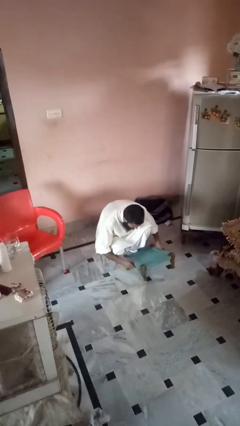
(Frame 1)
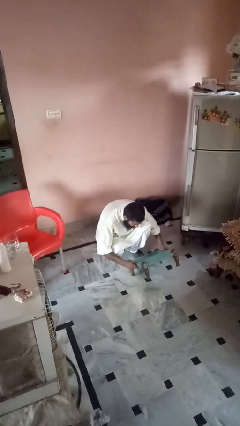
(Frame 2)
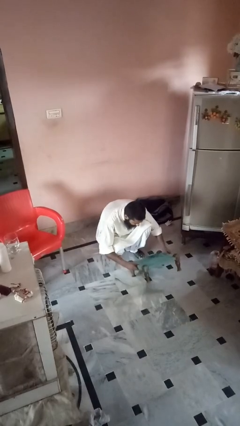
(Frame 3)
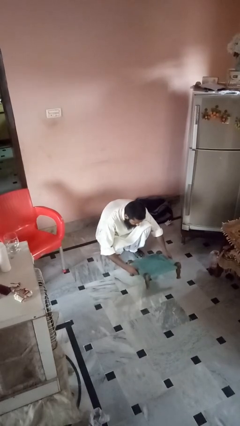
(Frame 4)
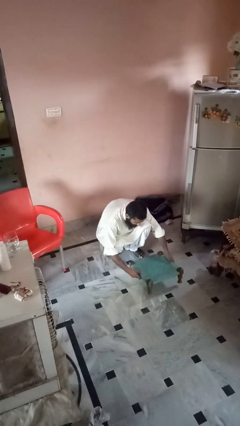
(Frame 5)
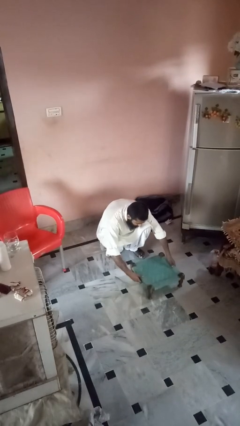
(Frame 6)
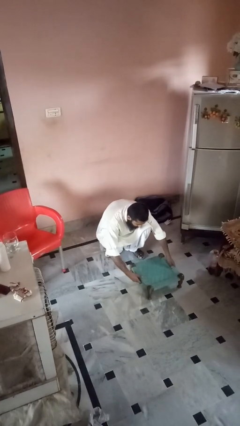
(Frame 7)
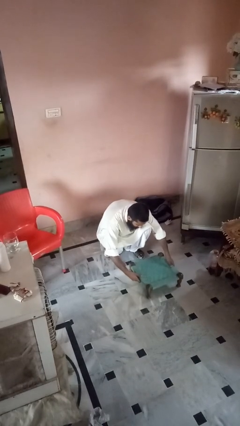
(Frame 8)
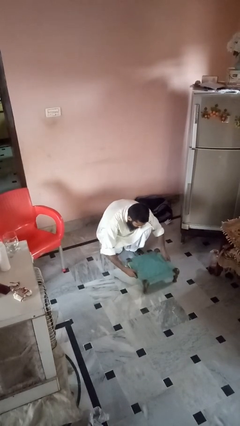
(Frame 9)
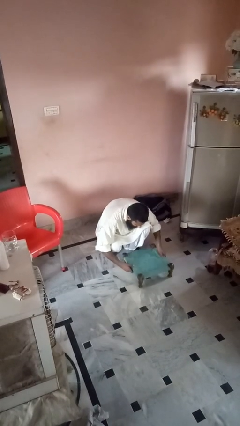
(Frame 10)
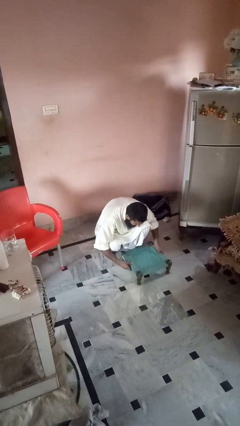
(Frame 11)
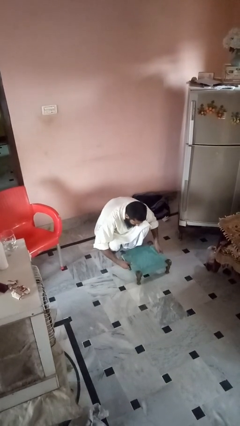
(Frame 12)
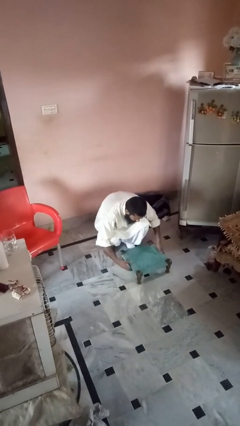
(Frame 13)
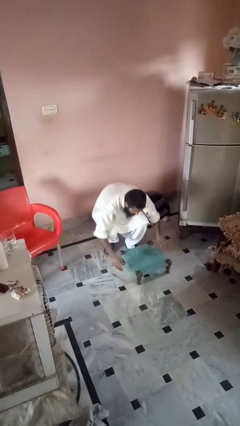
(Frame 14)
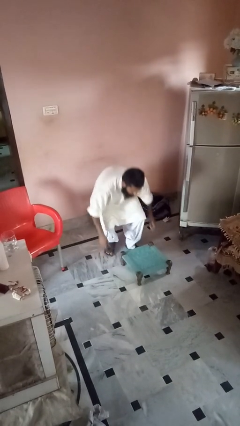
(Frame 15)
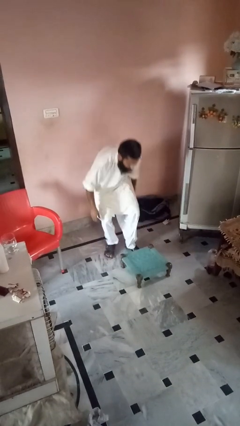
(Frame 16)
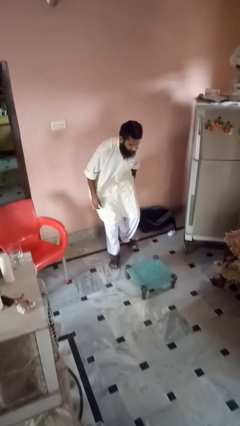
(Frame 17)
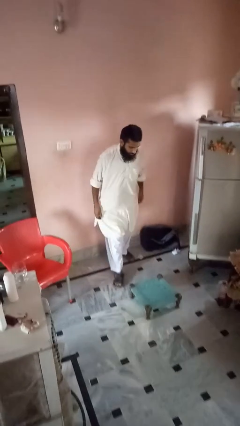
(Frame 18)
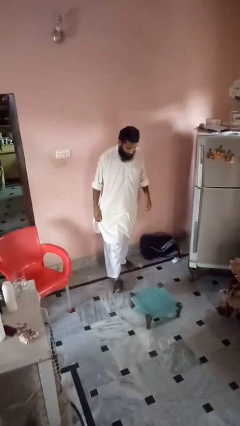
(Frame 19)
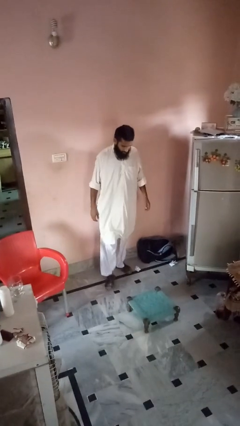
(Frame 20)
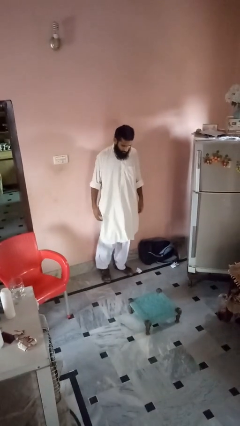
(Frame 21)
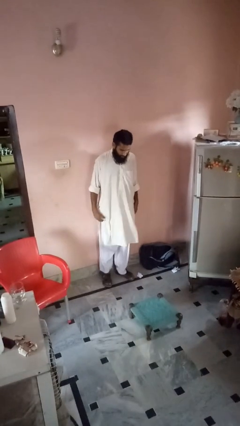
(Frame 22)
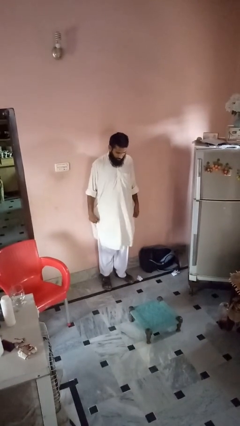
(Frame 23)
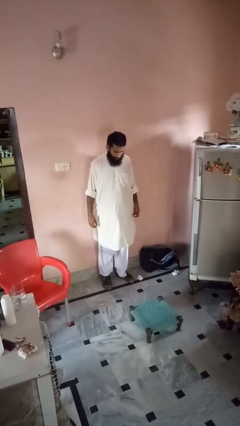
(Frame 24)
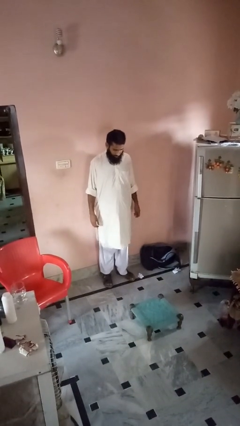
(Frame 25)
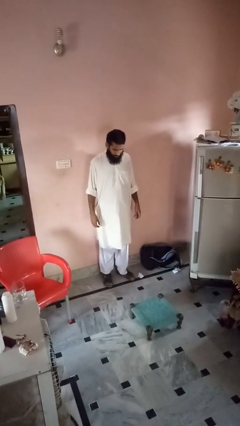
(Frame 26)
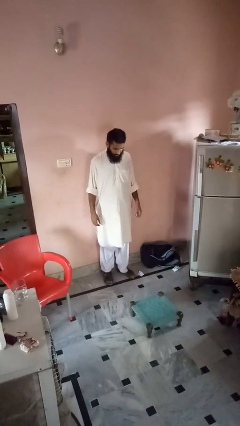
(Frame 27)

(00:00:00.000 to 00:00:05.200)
person sets upright furniture

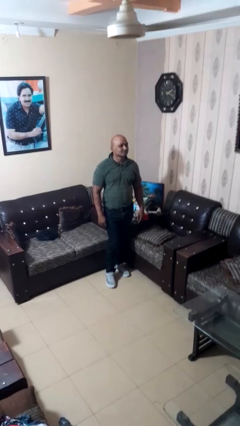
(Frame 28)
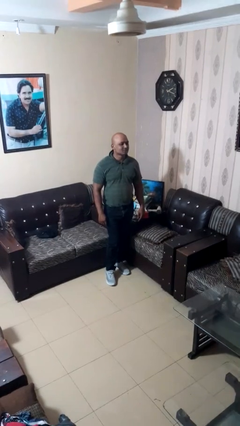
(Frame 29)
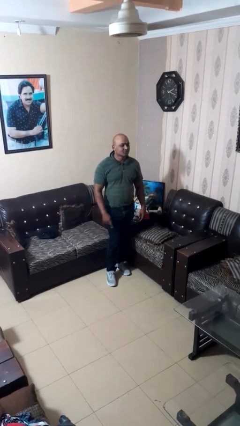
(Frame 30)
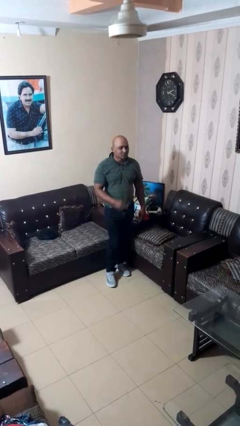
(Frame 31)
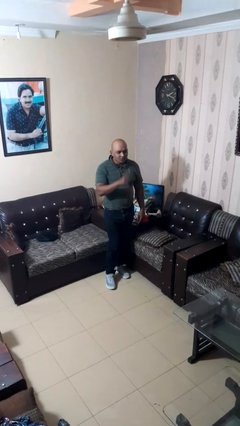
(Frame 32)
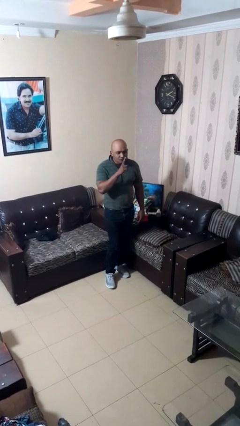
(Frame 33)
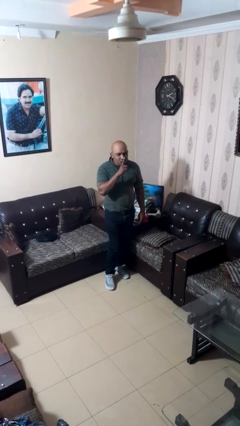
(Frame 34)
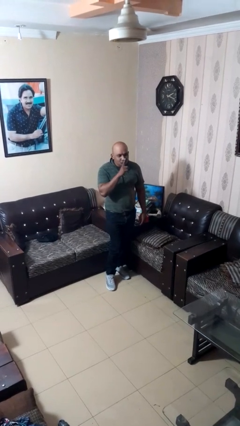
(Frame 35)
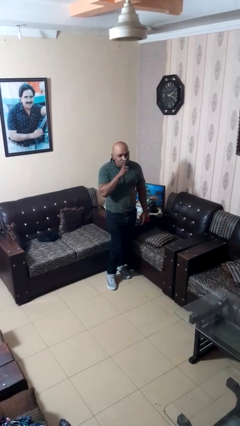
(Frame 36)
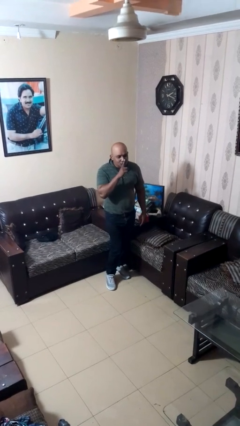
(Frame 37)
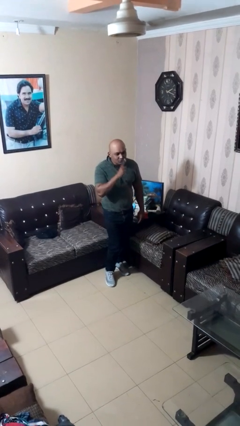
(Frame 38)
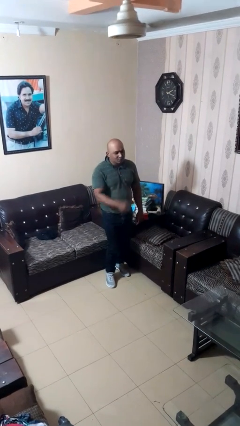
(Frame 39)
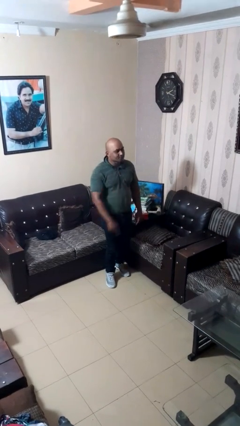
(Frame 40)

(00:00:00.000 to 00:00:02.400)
person gestures be quiet

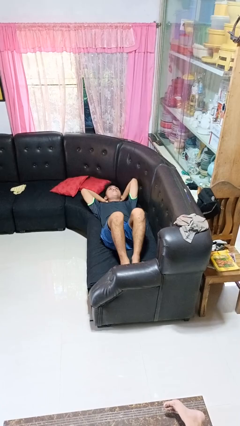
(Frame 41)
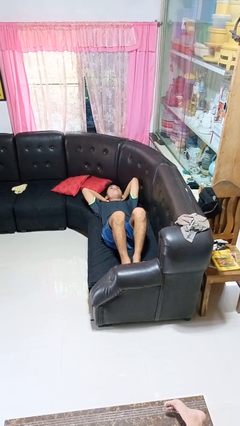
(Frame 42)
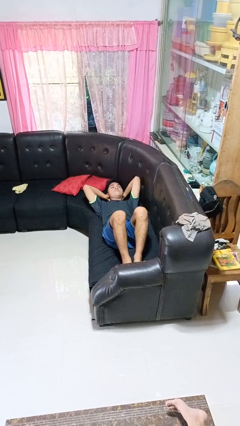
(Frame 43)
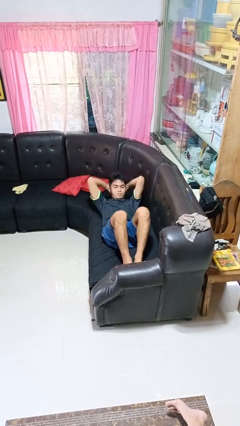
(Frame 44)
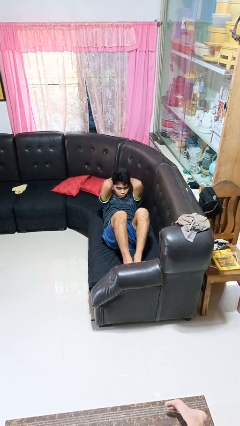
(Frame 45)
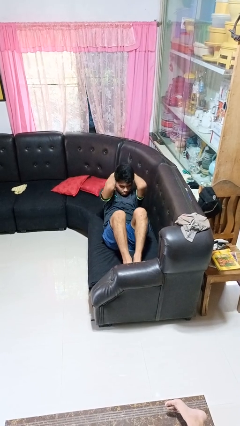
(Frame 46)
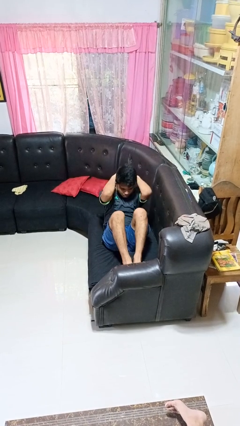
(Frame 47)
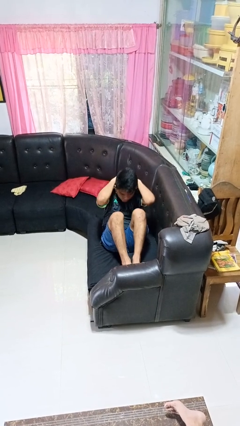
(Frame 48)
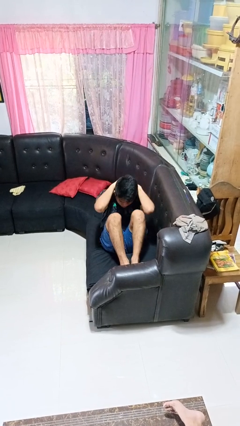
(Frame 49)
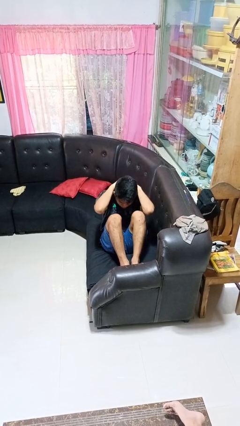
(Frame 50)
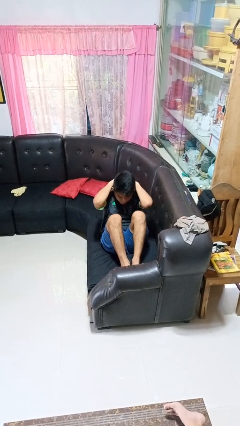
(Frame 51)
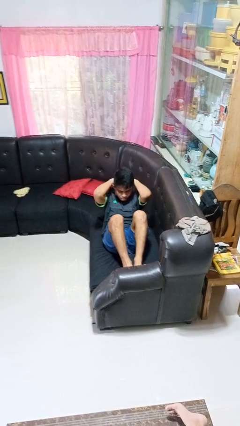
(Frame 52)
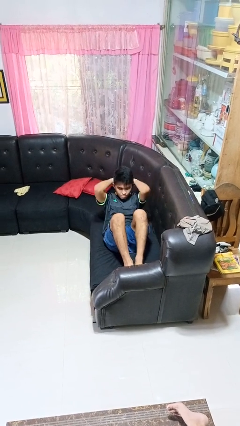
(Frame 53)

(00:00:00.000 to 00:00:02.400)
person exercises with situp

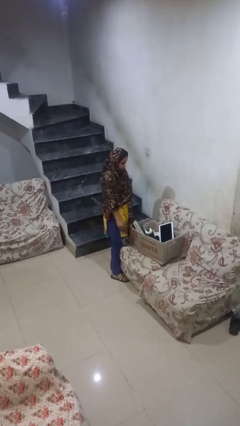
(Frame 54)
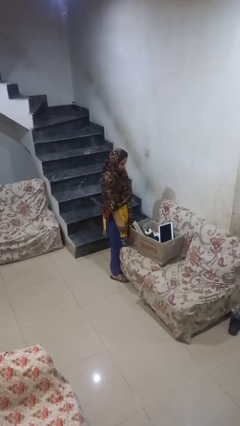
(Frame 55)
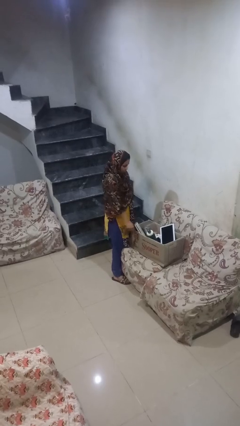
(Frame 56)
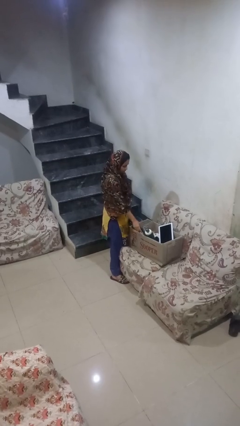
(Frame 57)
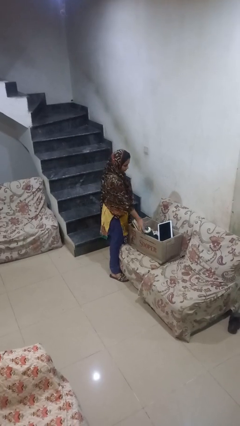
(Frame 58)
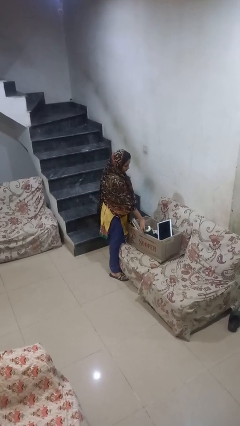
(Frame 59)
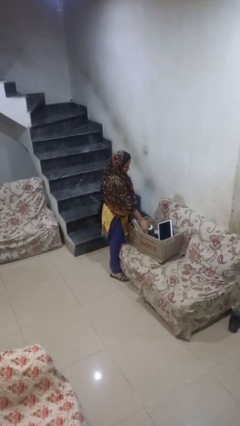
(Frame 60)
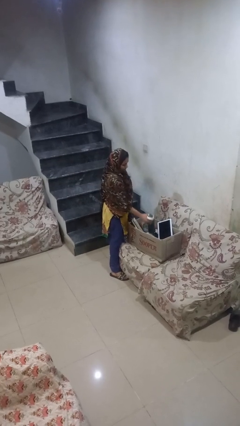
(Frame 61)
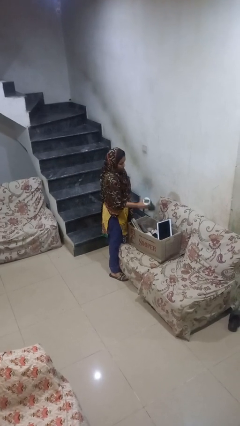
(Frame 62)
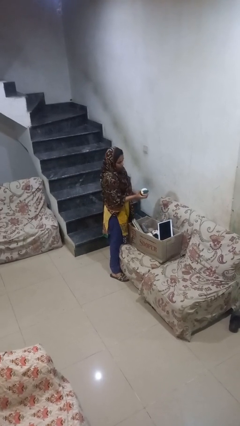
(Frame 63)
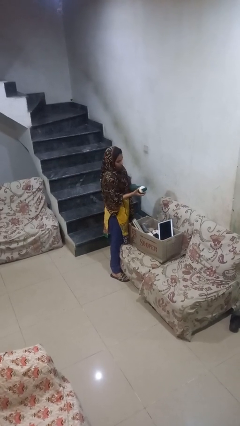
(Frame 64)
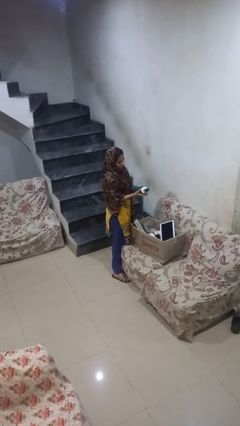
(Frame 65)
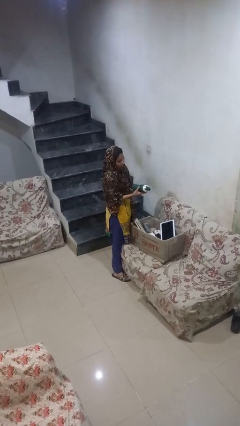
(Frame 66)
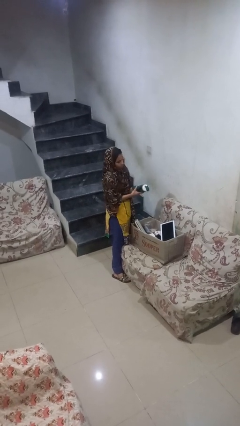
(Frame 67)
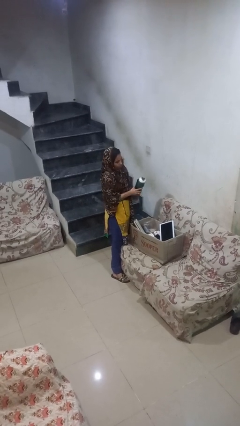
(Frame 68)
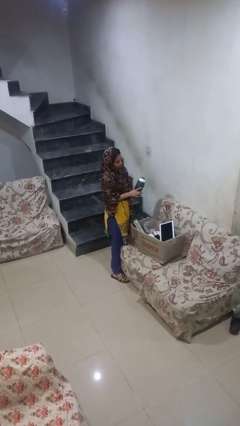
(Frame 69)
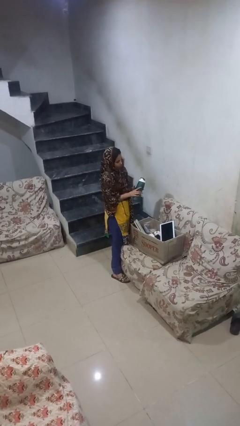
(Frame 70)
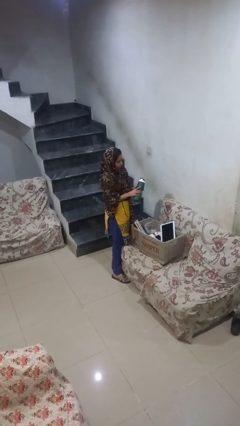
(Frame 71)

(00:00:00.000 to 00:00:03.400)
person takes object from box

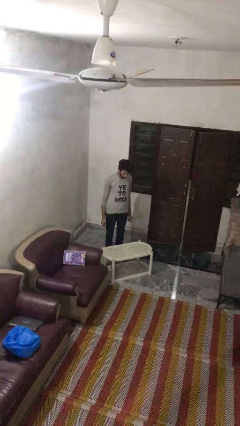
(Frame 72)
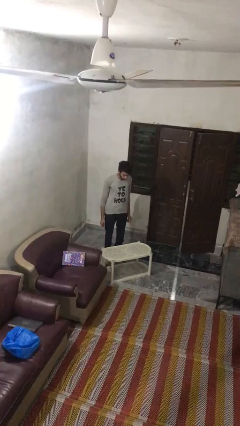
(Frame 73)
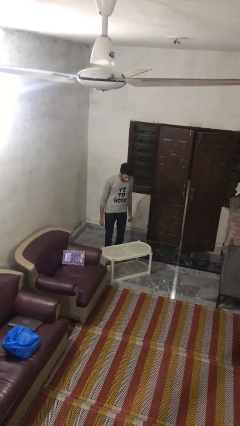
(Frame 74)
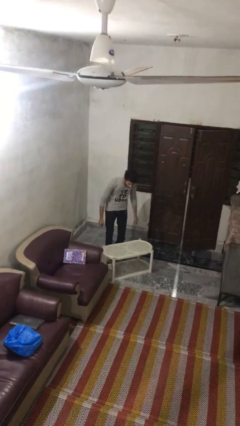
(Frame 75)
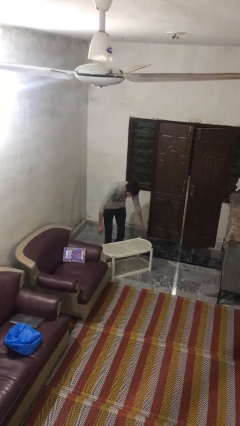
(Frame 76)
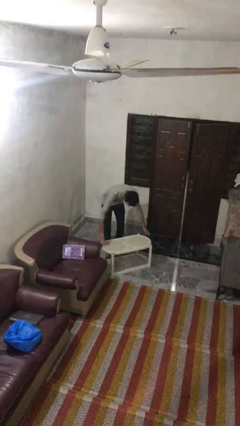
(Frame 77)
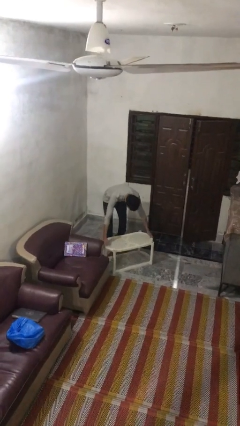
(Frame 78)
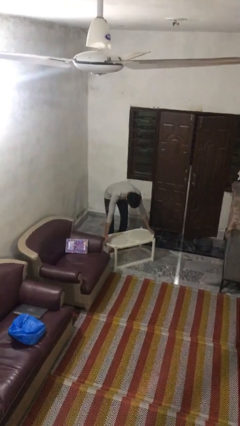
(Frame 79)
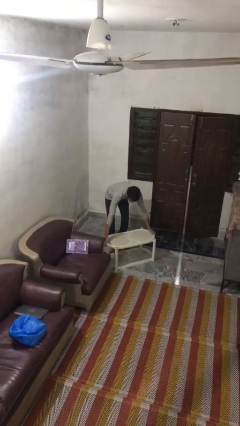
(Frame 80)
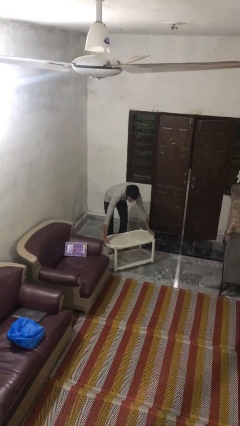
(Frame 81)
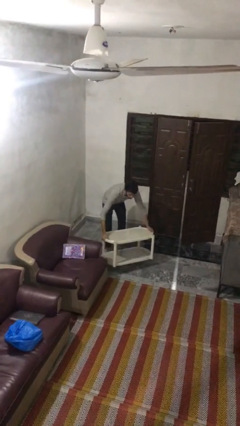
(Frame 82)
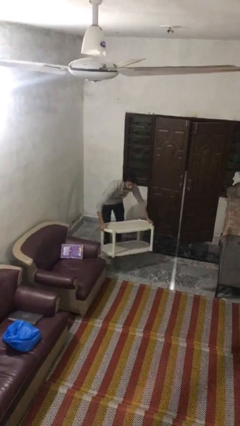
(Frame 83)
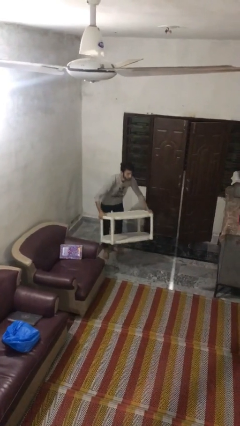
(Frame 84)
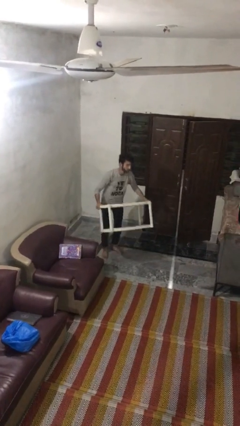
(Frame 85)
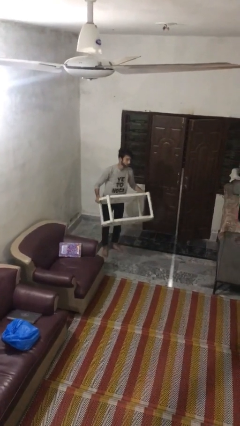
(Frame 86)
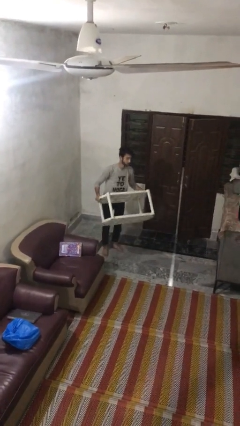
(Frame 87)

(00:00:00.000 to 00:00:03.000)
person picks up object from floor

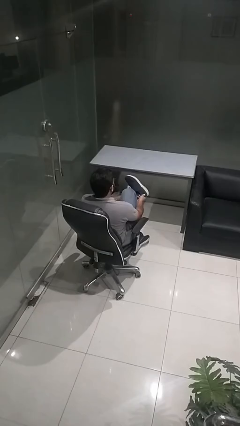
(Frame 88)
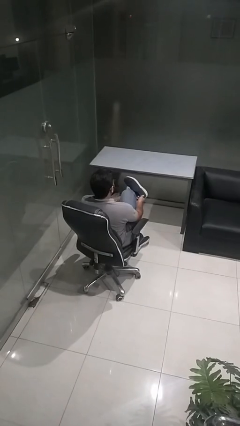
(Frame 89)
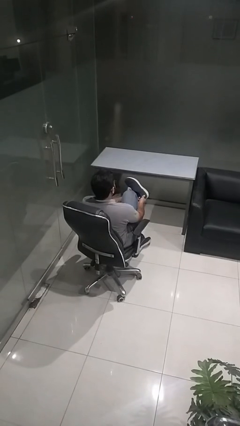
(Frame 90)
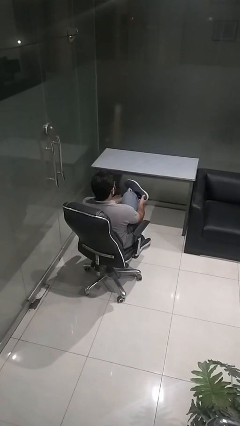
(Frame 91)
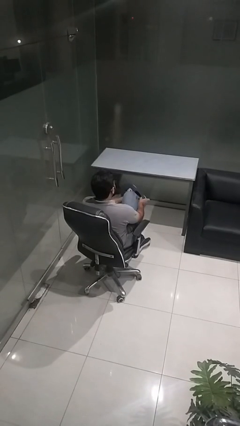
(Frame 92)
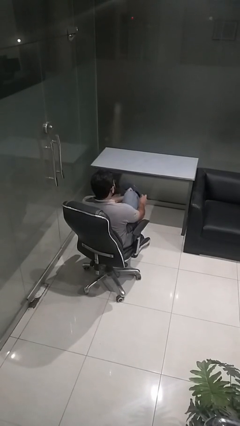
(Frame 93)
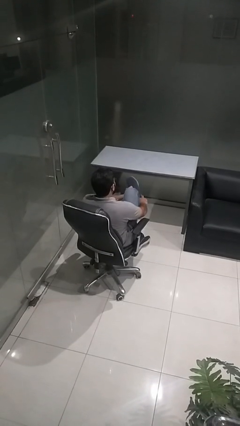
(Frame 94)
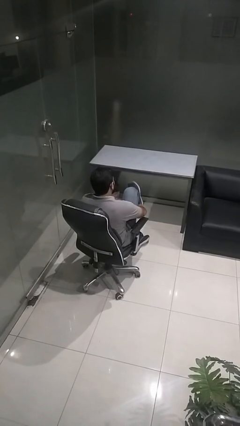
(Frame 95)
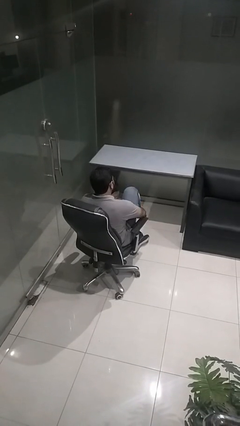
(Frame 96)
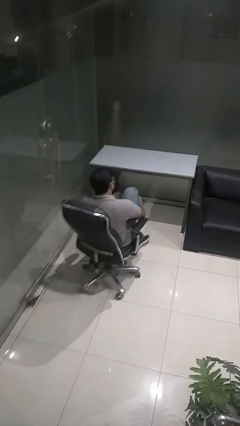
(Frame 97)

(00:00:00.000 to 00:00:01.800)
person puts on shoes
